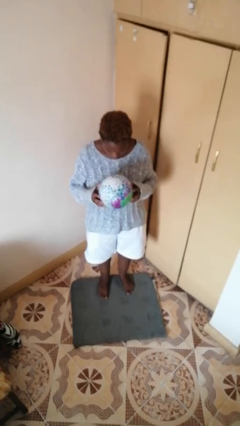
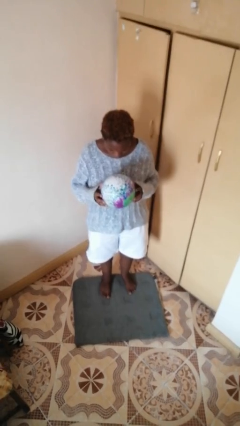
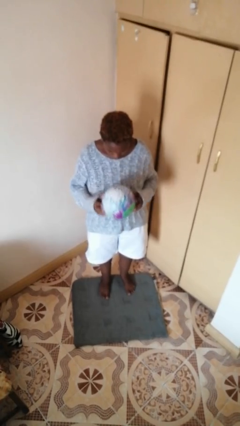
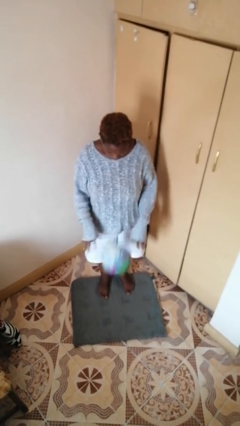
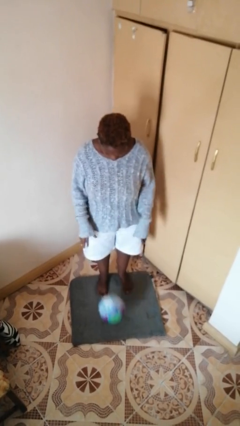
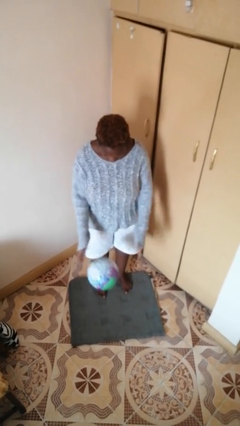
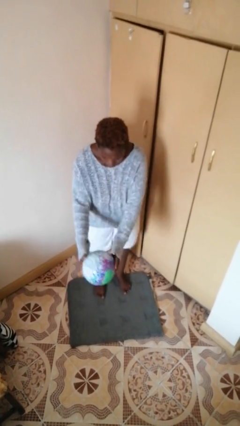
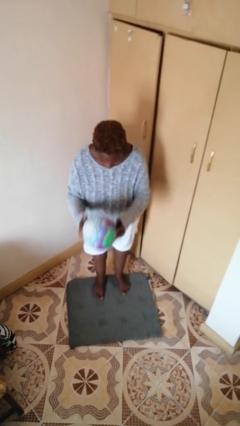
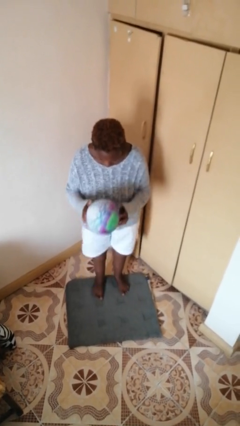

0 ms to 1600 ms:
person bounces ball on floor

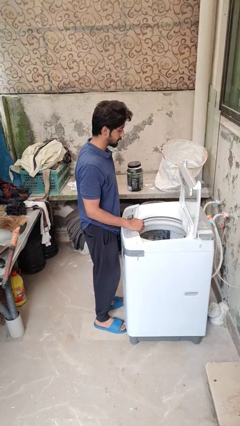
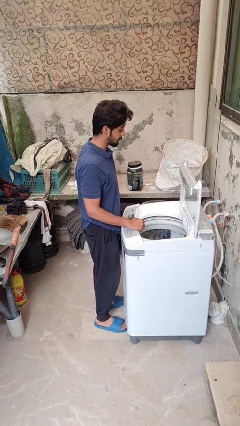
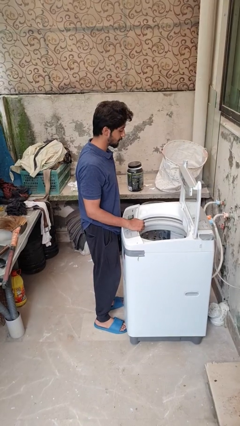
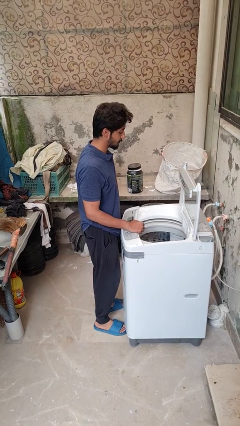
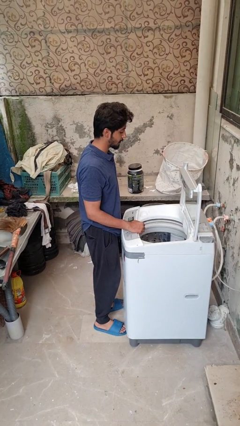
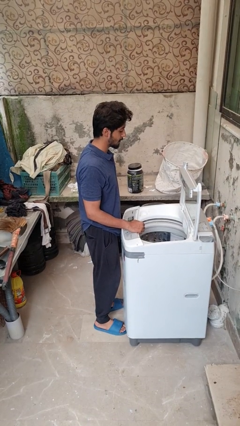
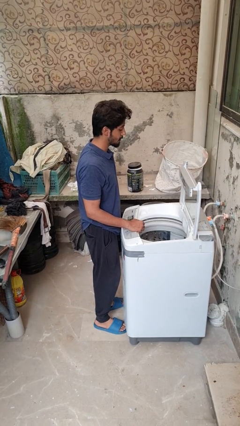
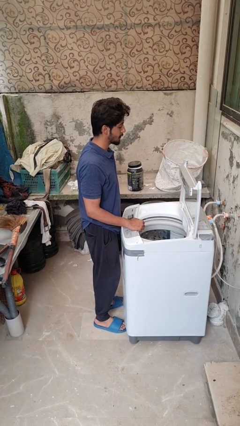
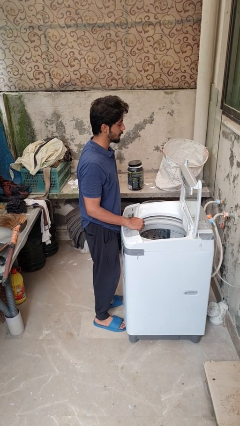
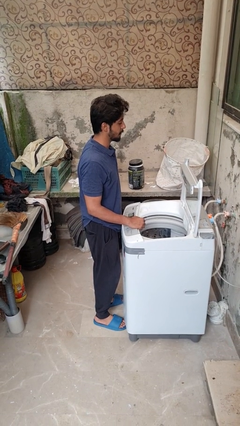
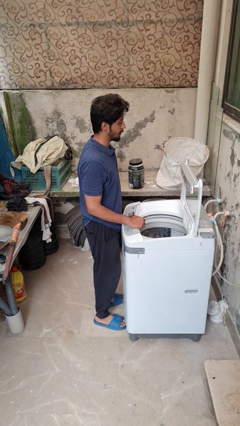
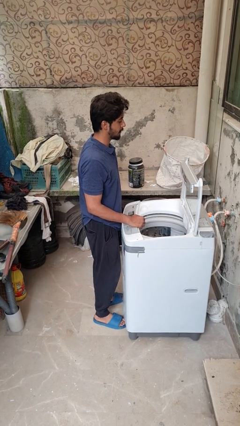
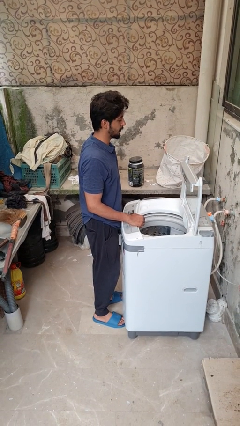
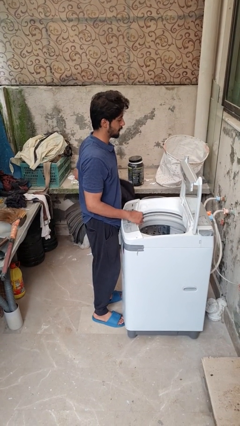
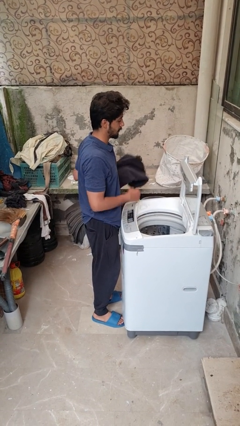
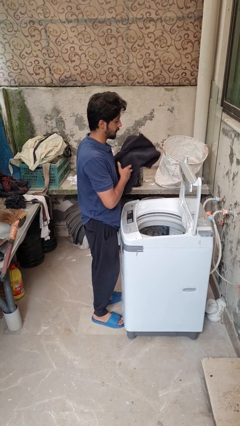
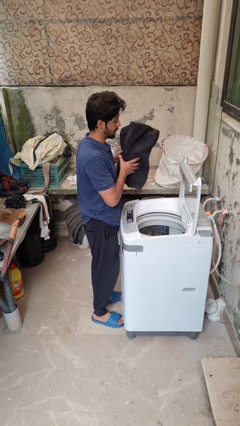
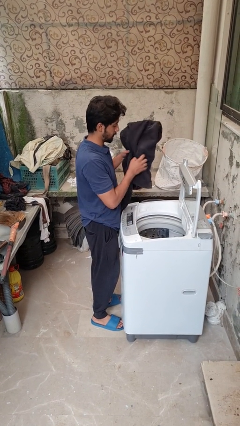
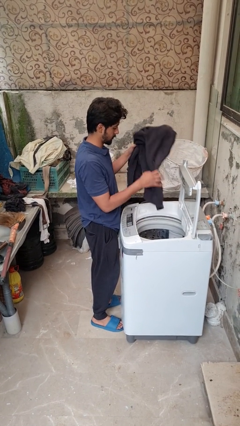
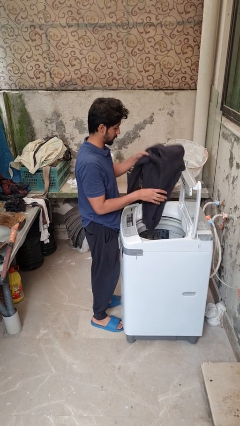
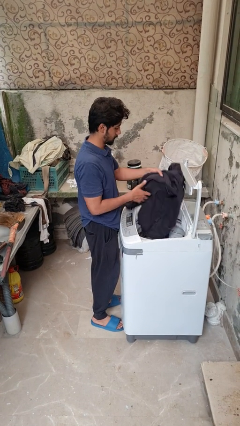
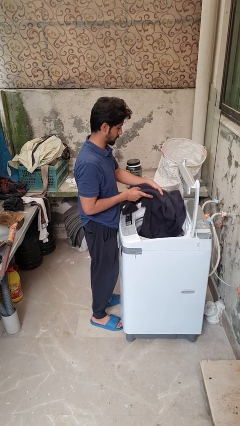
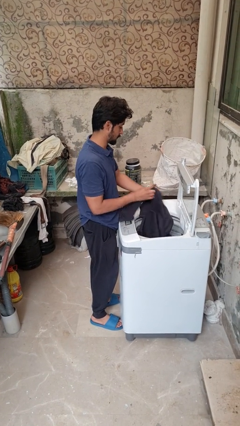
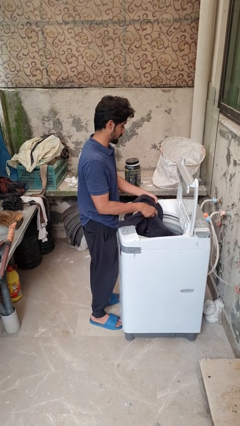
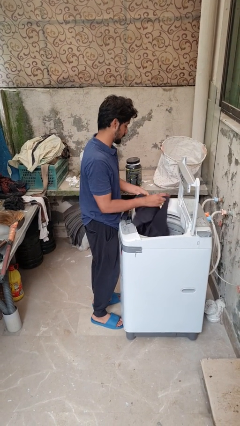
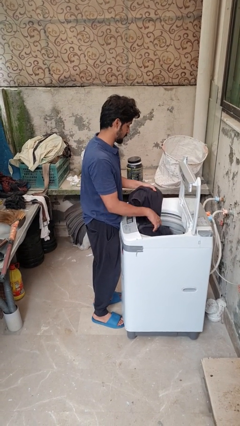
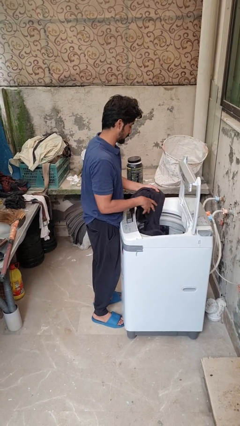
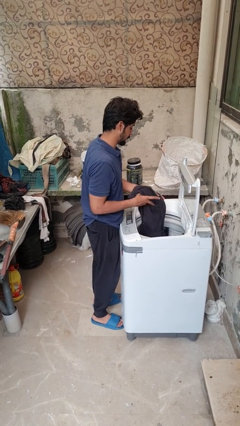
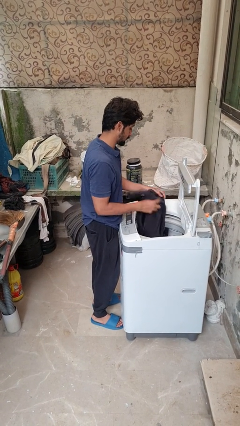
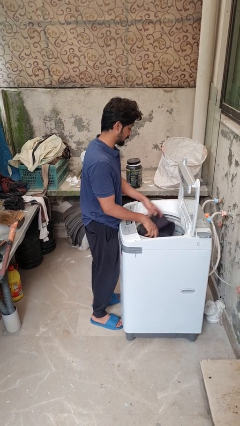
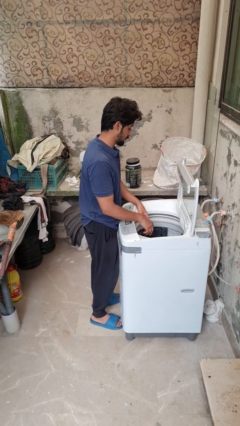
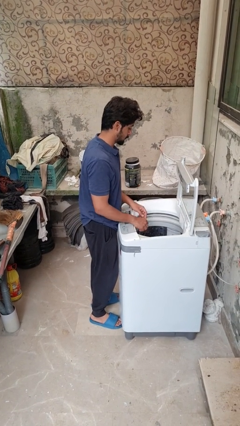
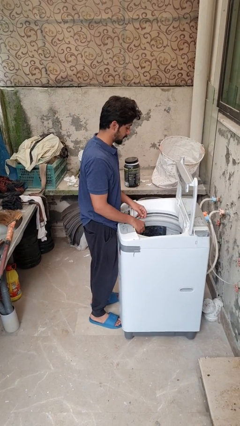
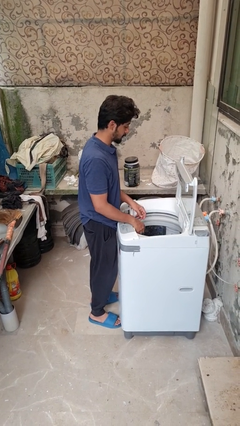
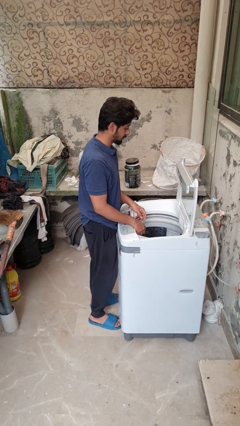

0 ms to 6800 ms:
person loads dryer

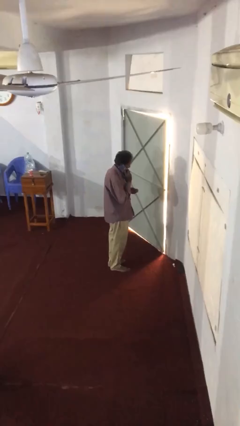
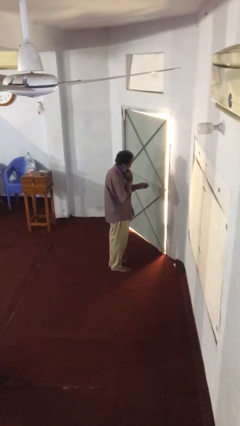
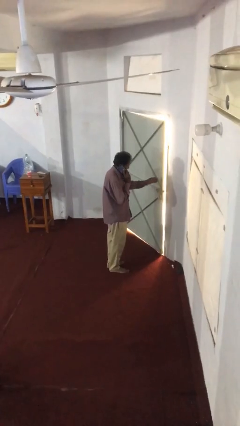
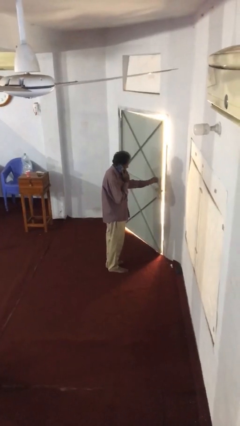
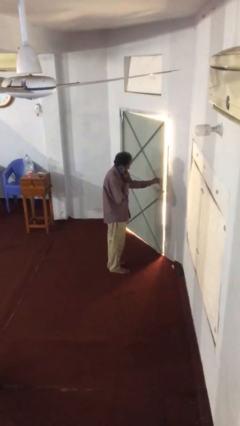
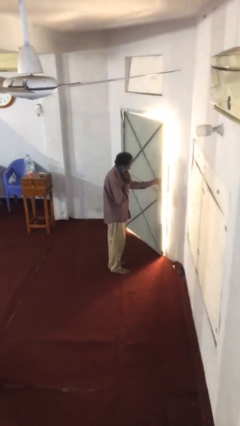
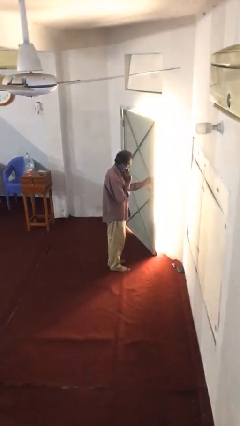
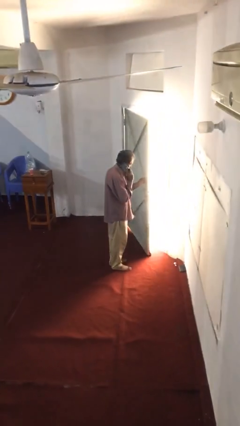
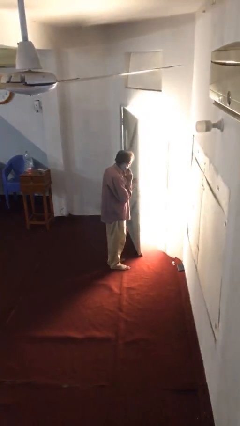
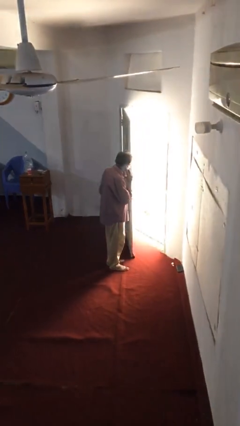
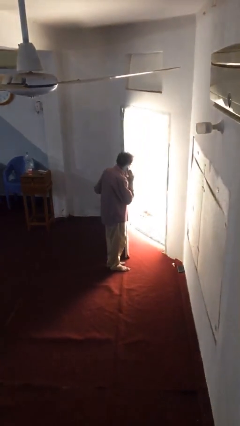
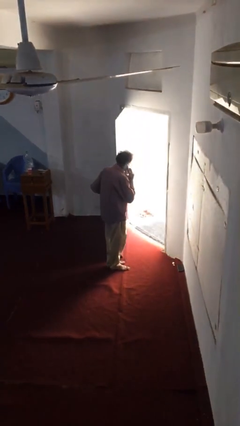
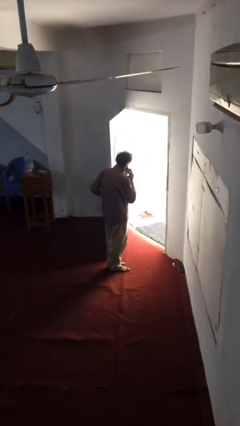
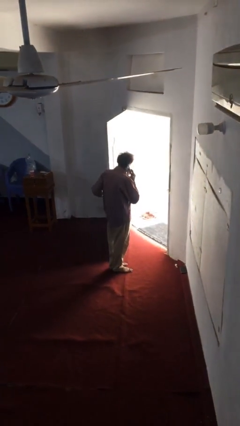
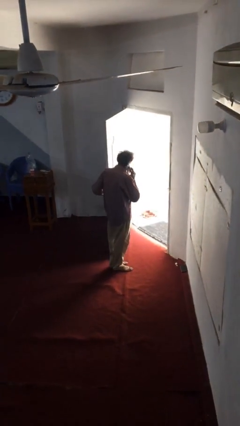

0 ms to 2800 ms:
person opens facility door

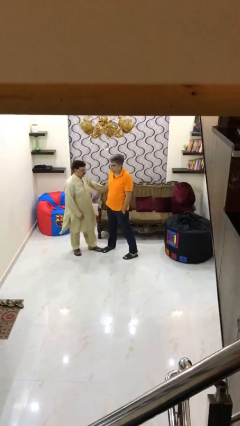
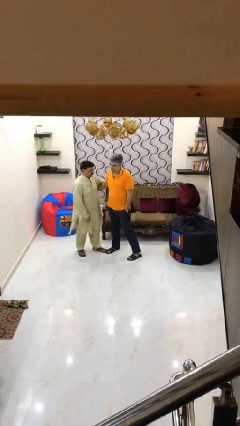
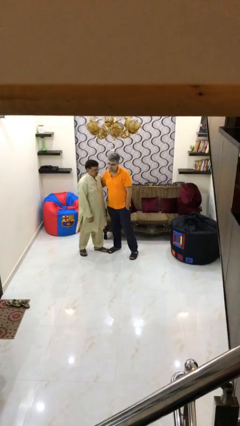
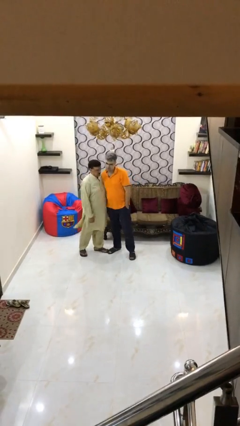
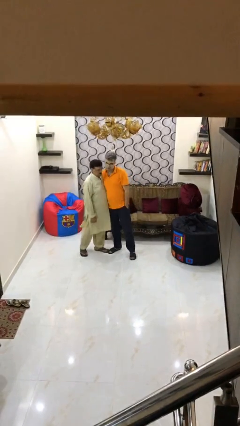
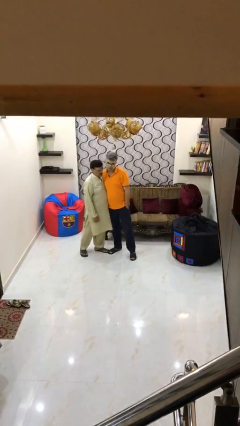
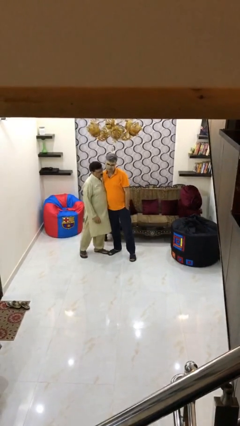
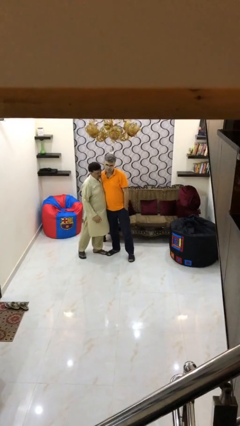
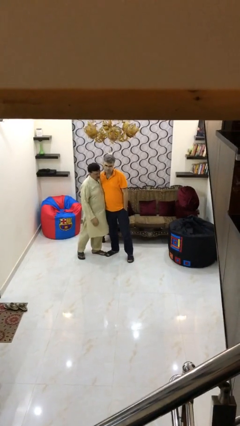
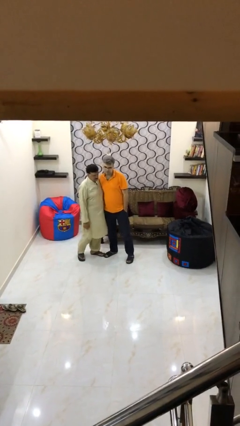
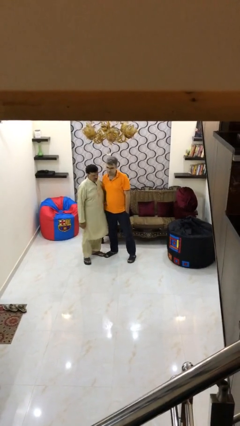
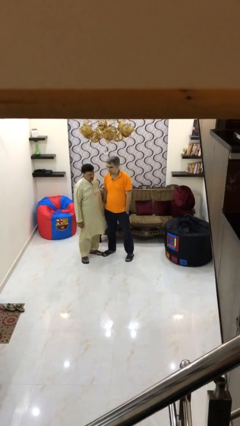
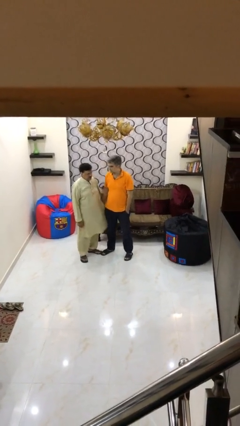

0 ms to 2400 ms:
person embraces person

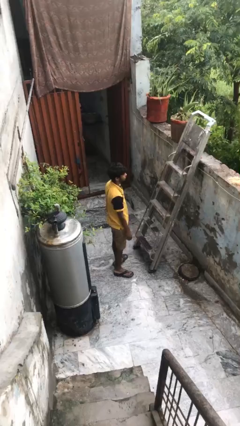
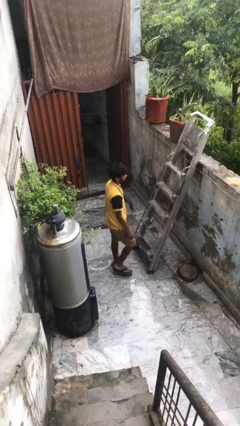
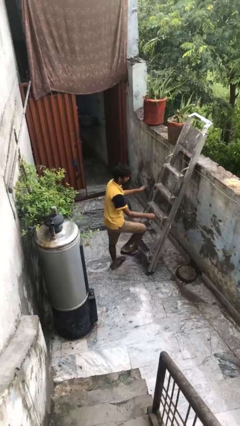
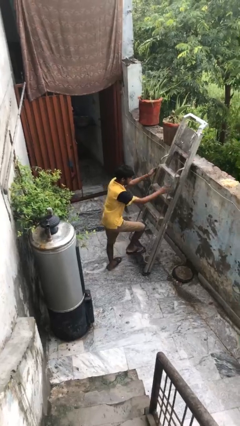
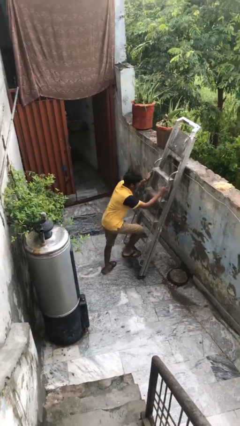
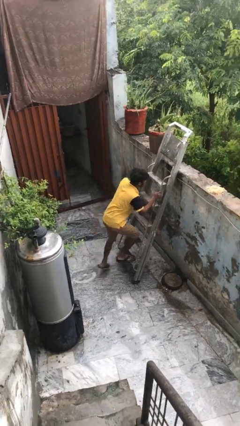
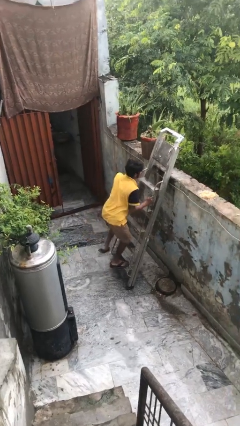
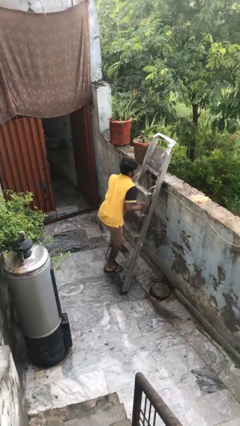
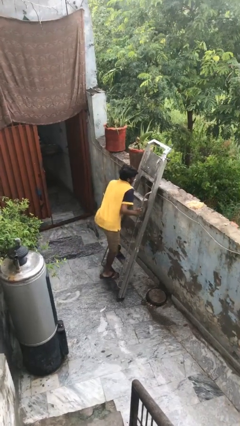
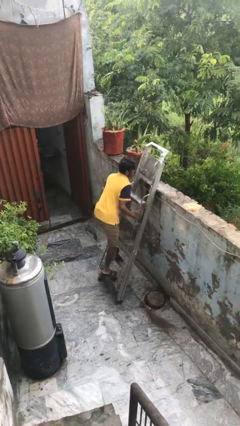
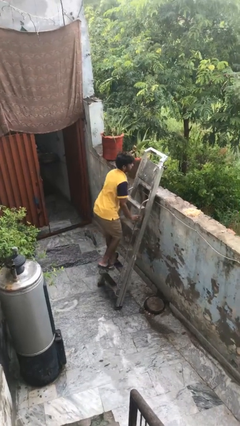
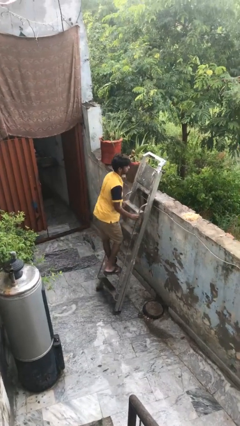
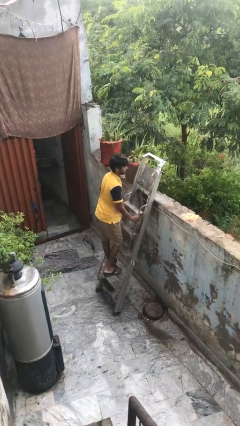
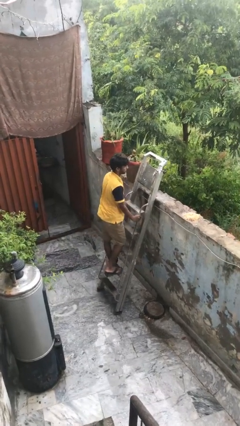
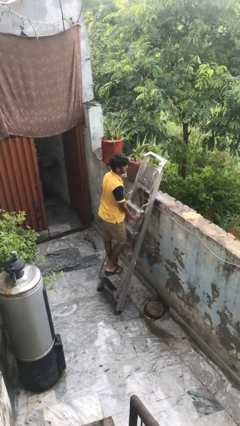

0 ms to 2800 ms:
person climbs up ladder

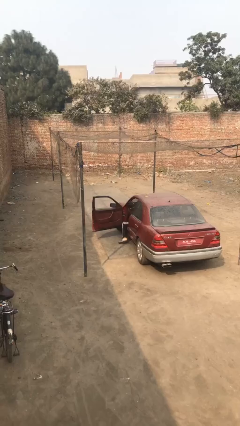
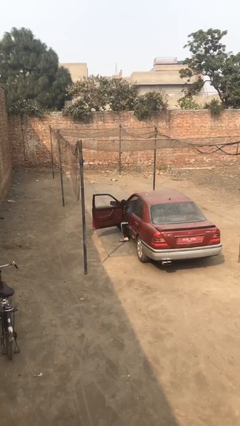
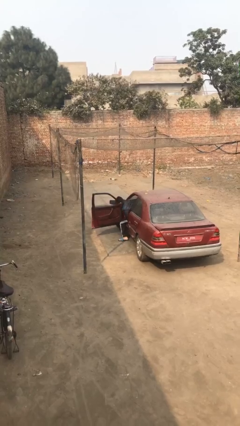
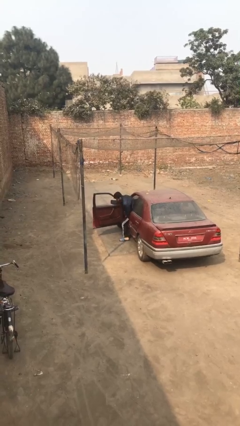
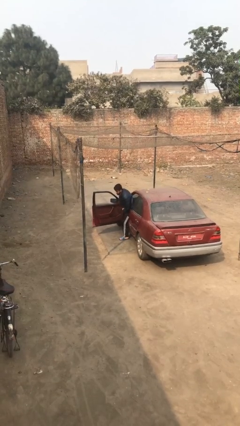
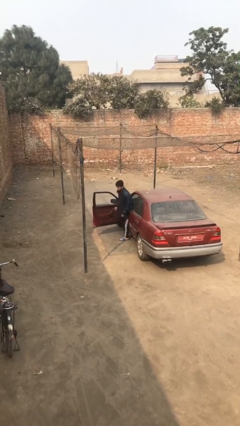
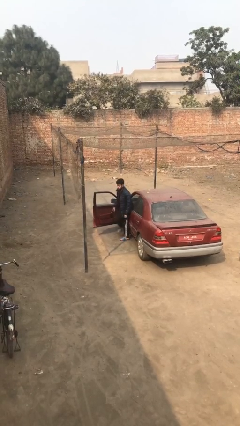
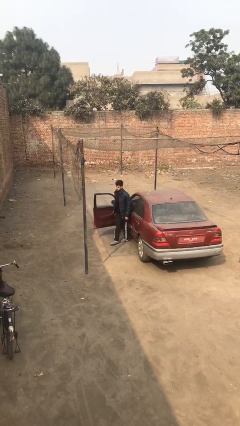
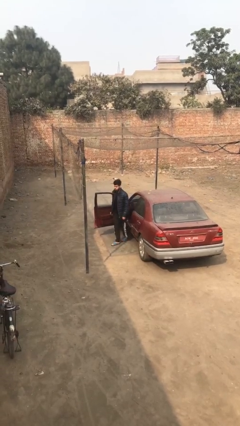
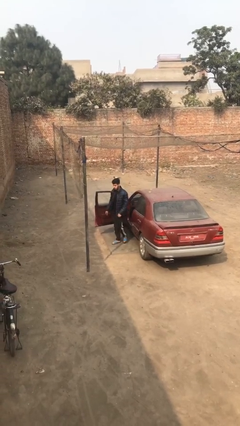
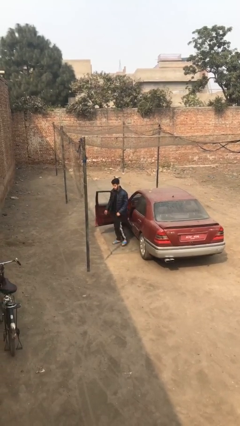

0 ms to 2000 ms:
person exits car
